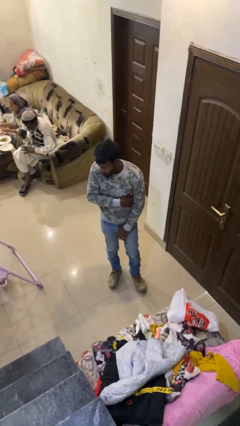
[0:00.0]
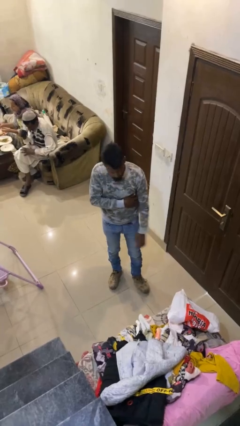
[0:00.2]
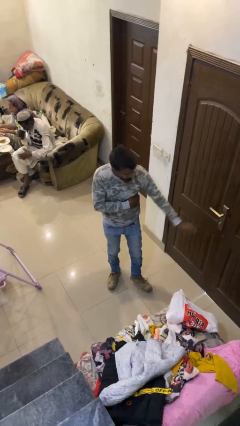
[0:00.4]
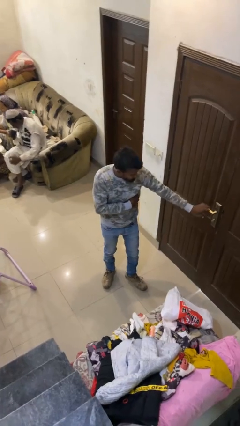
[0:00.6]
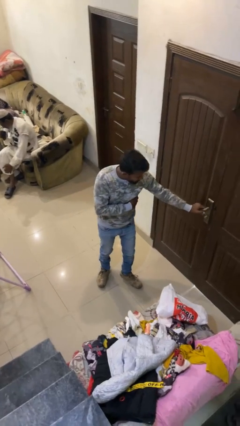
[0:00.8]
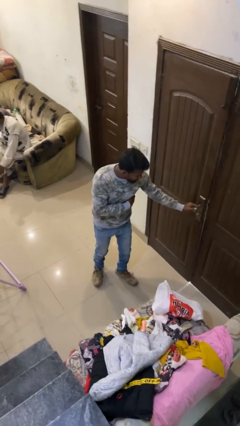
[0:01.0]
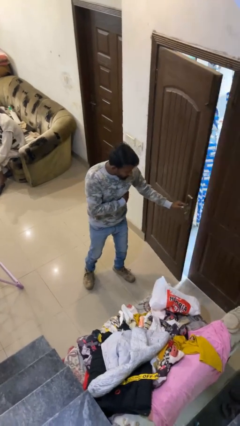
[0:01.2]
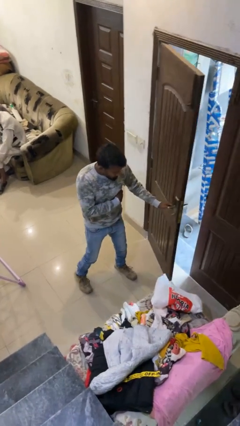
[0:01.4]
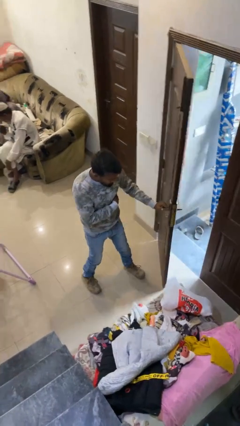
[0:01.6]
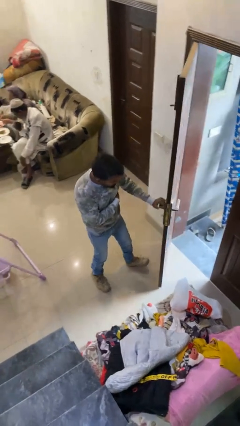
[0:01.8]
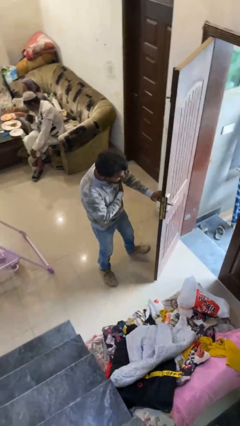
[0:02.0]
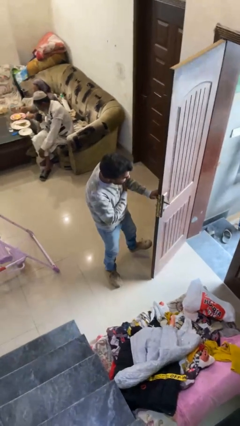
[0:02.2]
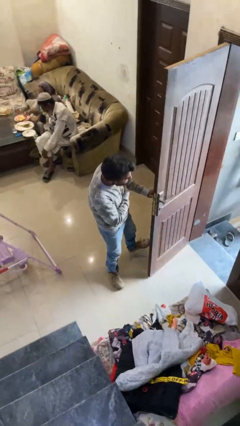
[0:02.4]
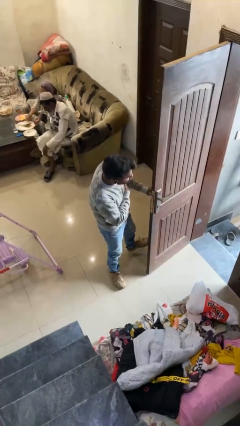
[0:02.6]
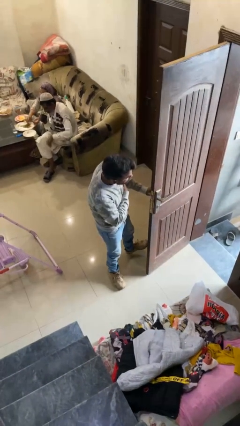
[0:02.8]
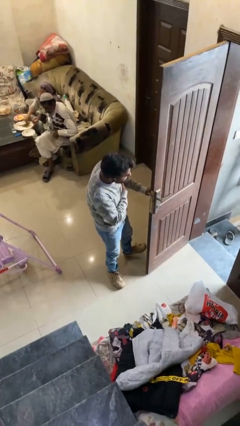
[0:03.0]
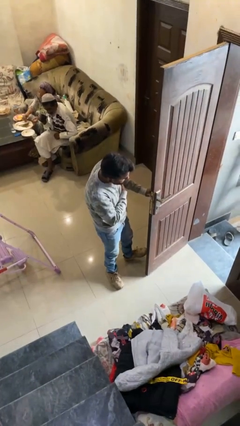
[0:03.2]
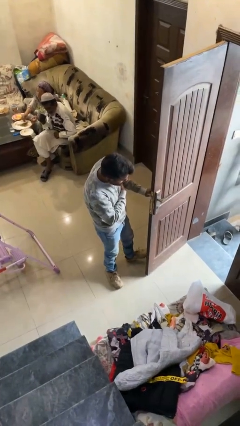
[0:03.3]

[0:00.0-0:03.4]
person opens facility door

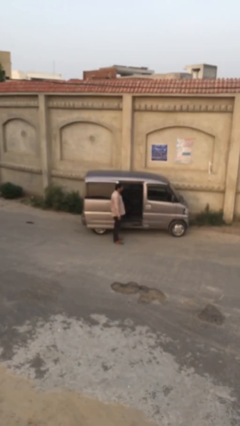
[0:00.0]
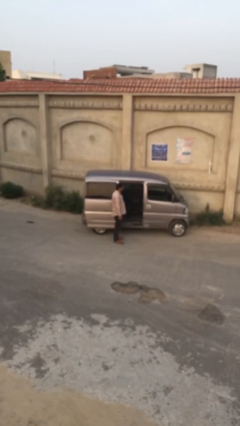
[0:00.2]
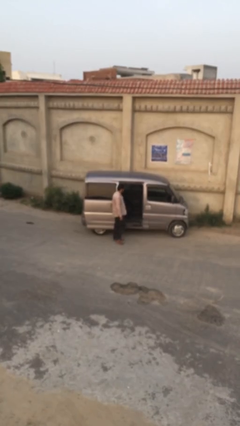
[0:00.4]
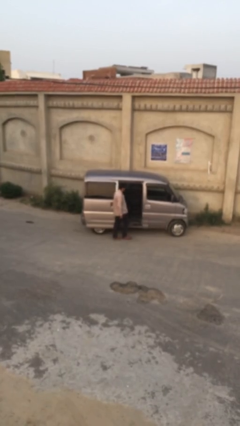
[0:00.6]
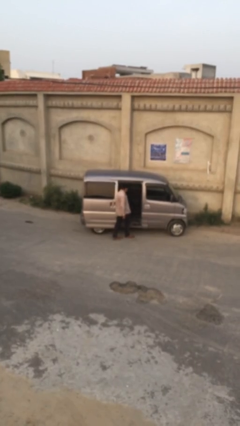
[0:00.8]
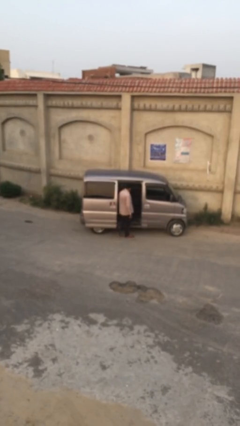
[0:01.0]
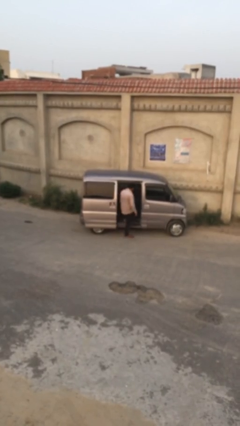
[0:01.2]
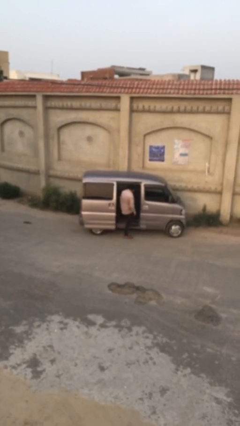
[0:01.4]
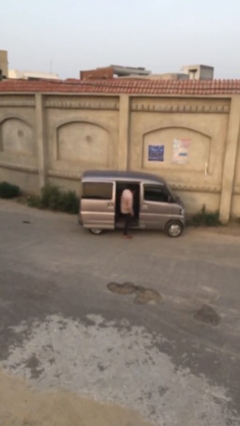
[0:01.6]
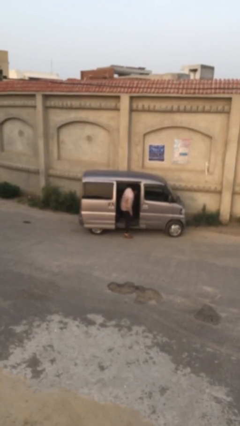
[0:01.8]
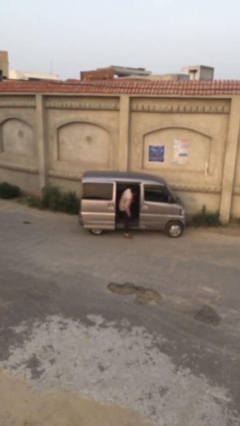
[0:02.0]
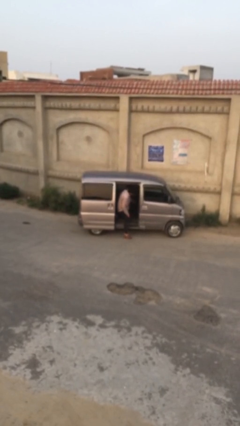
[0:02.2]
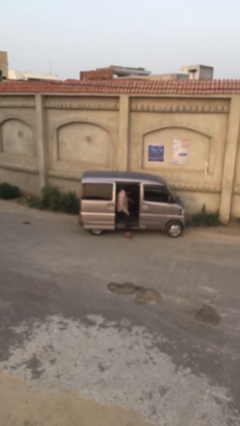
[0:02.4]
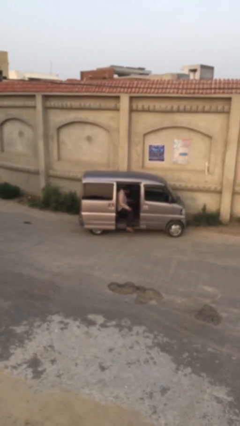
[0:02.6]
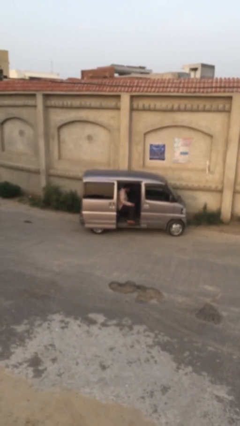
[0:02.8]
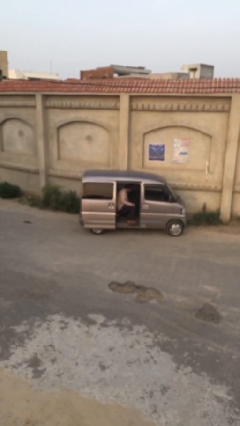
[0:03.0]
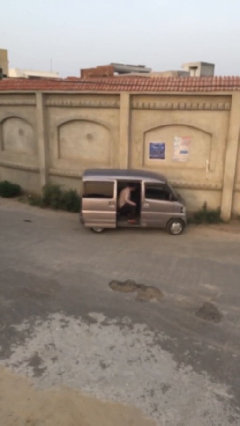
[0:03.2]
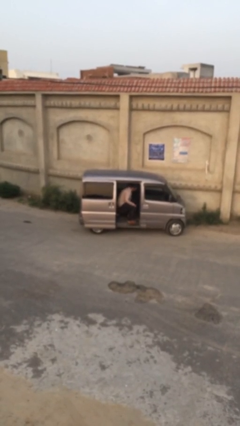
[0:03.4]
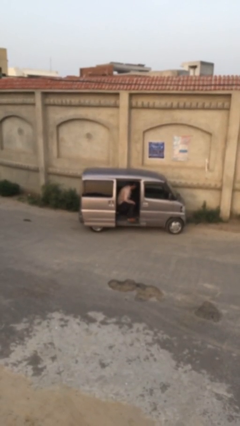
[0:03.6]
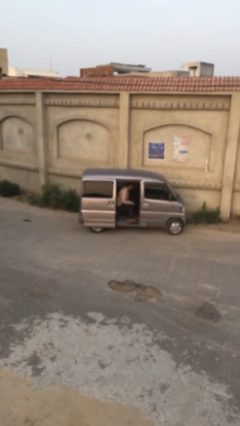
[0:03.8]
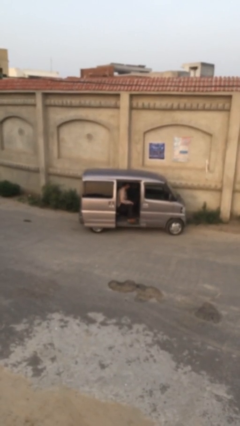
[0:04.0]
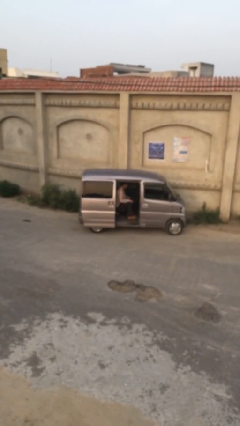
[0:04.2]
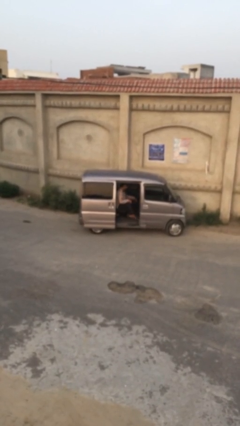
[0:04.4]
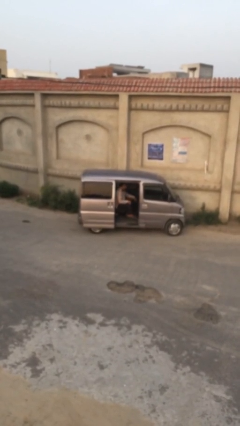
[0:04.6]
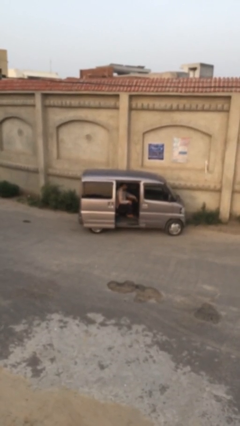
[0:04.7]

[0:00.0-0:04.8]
person enters car

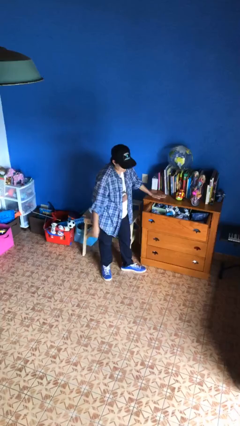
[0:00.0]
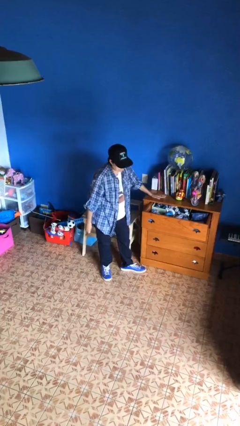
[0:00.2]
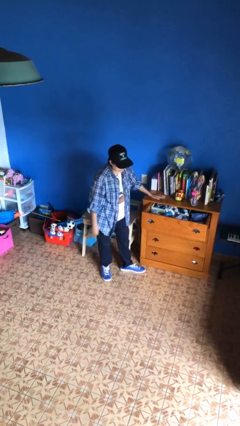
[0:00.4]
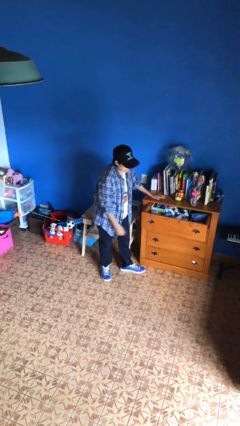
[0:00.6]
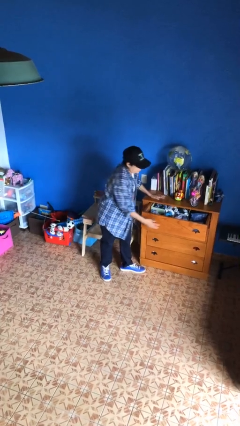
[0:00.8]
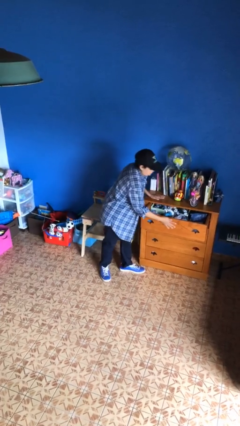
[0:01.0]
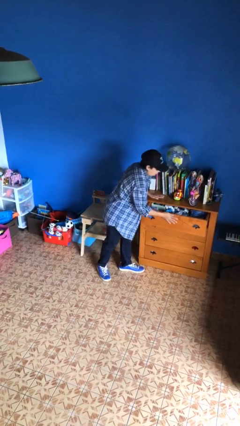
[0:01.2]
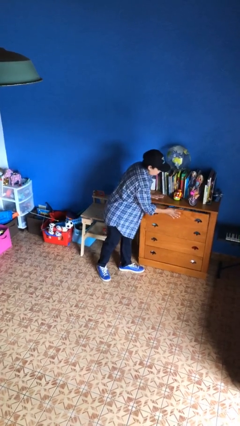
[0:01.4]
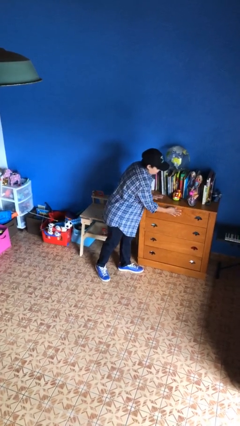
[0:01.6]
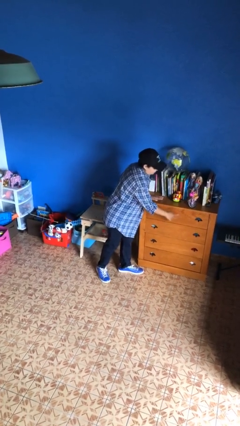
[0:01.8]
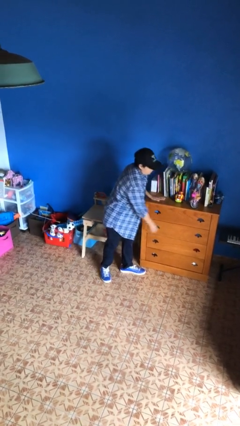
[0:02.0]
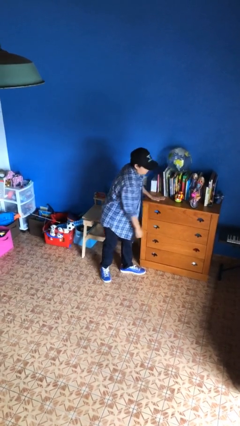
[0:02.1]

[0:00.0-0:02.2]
person closes dresser drawer

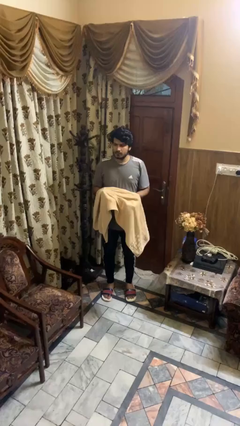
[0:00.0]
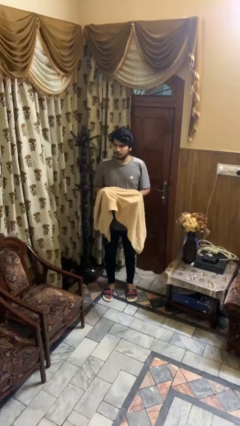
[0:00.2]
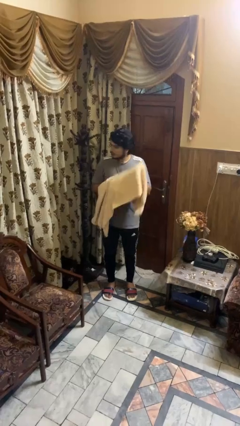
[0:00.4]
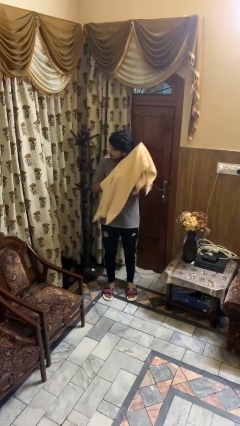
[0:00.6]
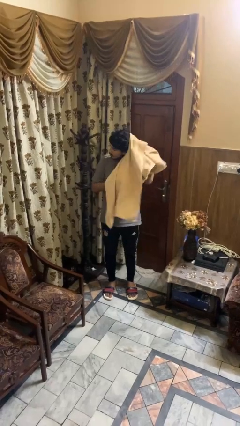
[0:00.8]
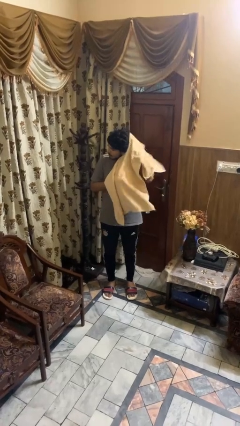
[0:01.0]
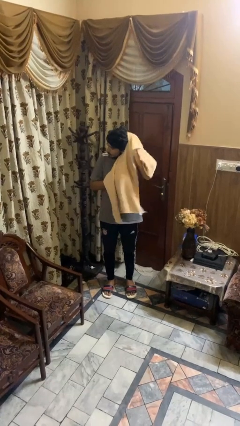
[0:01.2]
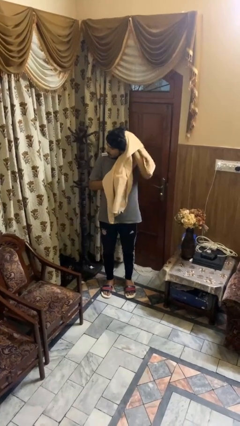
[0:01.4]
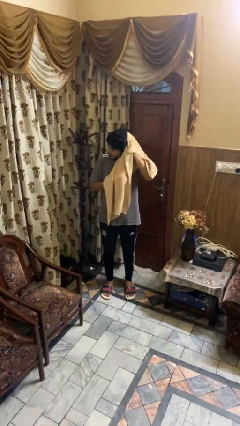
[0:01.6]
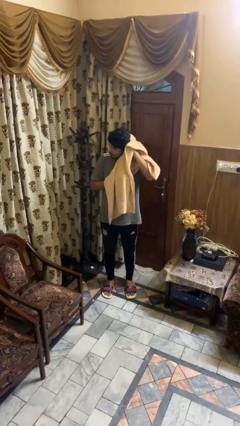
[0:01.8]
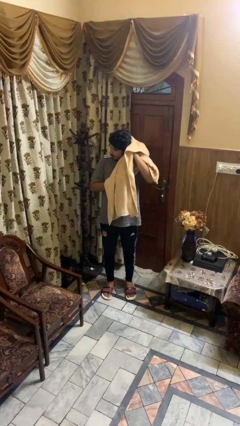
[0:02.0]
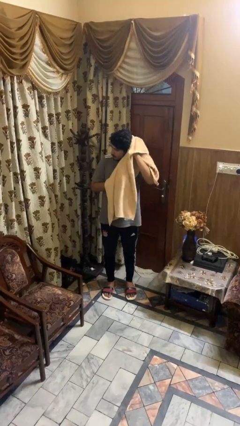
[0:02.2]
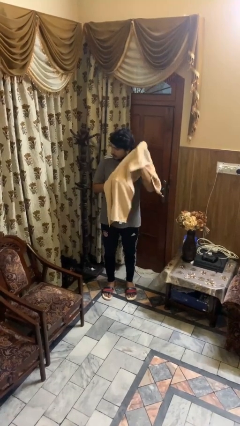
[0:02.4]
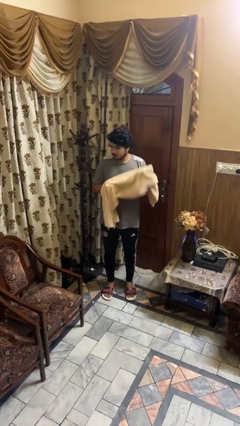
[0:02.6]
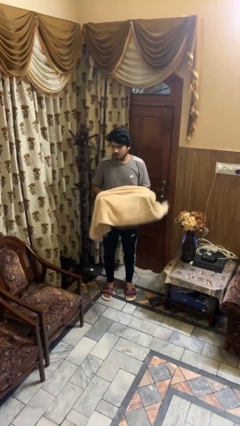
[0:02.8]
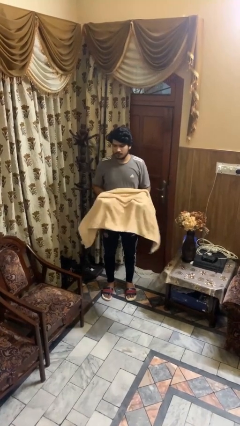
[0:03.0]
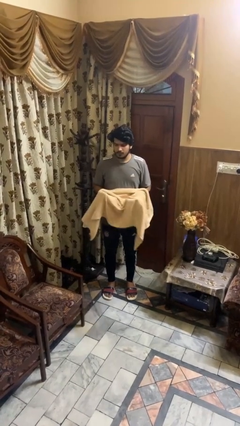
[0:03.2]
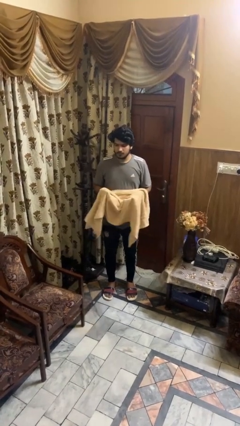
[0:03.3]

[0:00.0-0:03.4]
person dries hair with towel

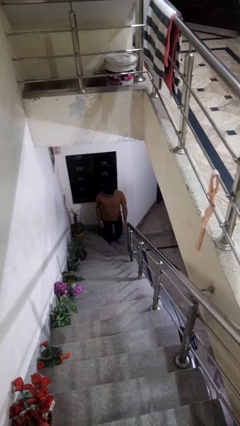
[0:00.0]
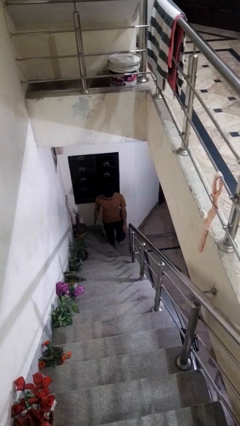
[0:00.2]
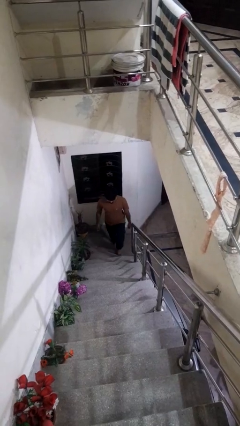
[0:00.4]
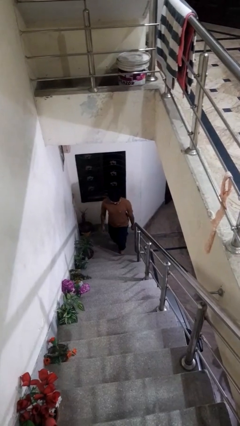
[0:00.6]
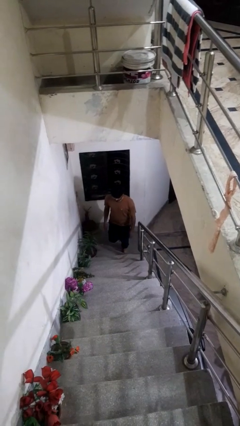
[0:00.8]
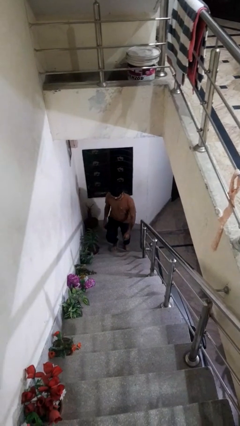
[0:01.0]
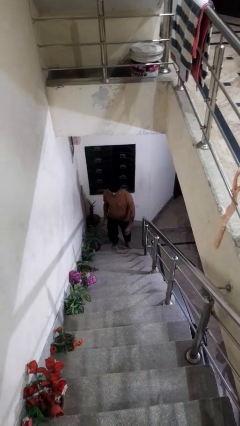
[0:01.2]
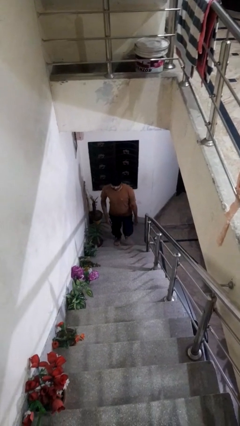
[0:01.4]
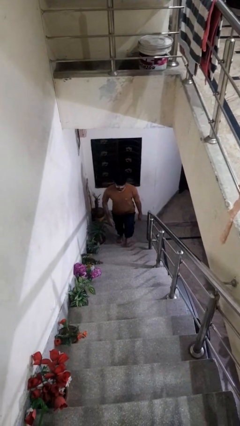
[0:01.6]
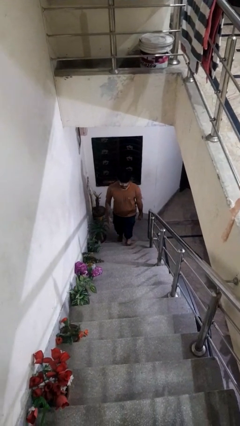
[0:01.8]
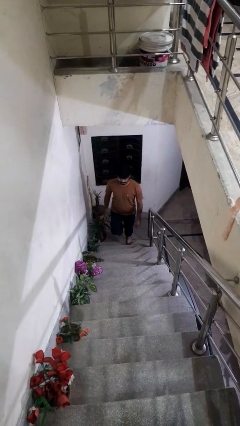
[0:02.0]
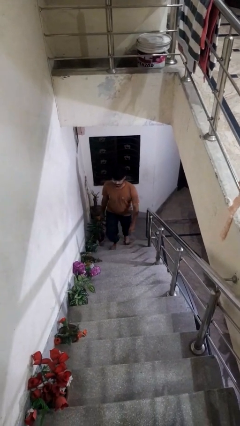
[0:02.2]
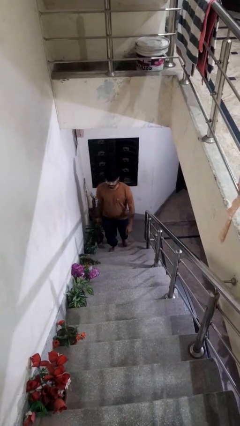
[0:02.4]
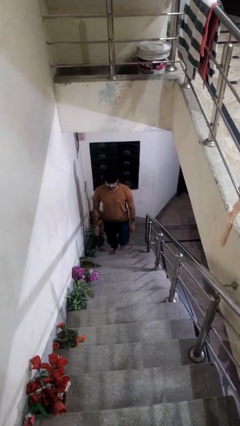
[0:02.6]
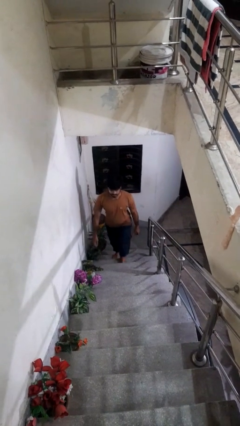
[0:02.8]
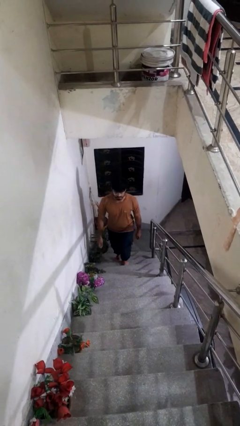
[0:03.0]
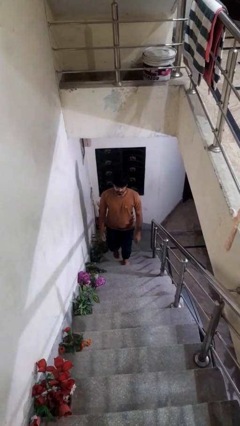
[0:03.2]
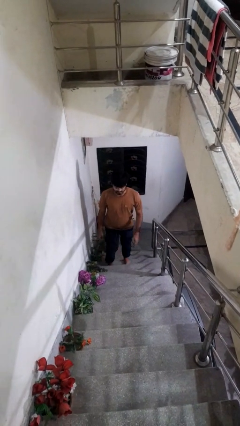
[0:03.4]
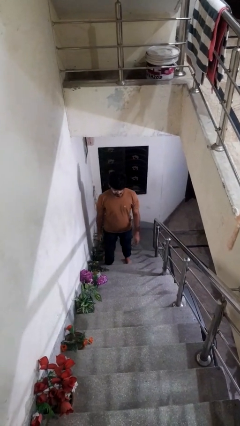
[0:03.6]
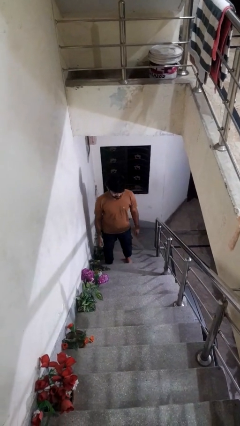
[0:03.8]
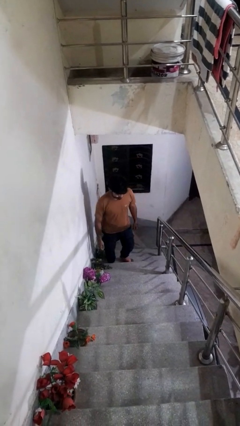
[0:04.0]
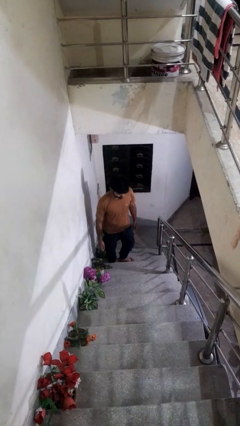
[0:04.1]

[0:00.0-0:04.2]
person climbs up stairs
